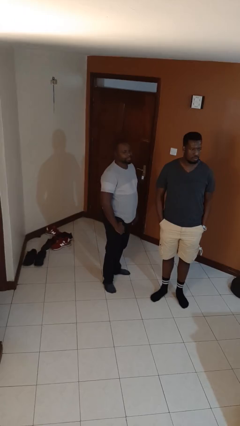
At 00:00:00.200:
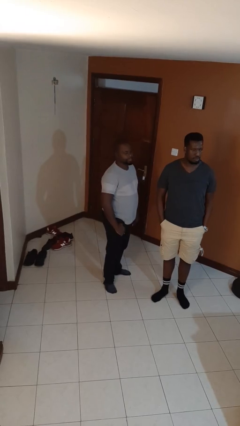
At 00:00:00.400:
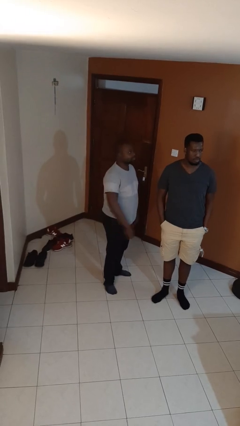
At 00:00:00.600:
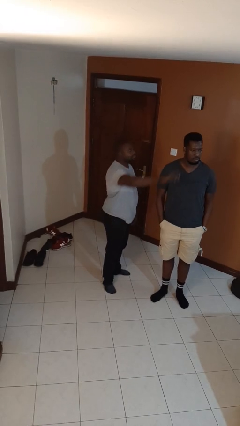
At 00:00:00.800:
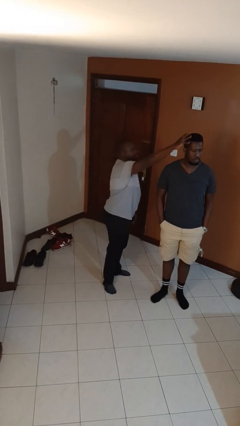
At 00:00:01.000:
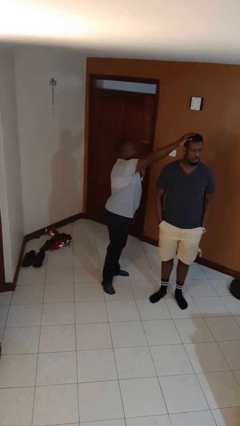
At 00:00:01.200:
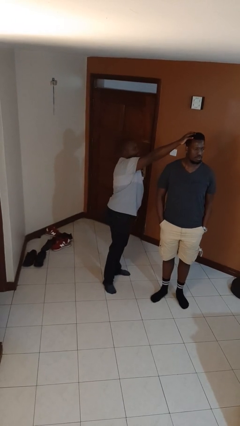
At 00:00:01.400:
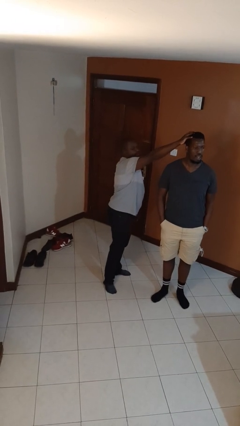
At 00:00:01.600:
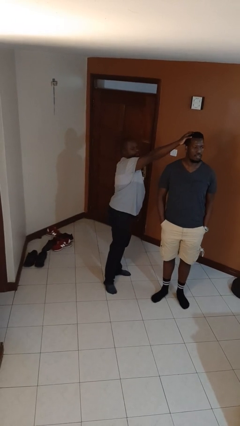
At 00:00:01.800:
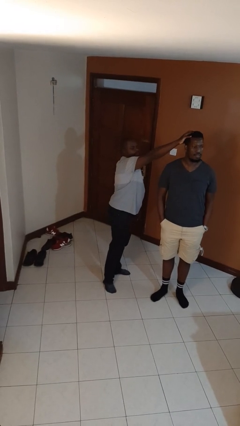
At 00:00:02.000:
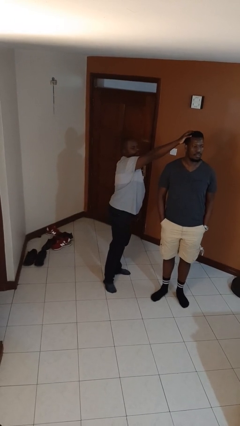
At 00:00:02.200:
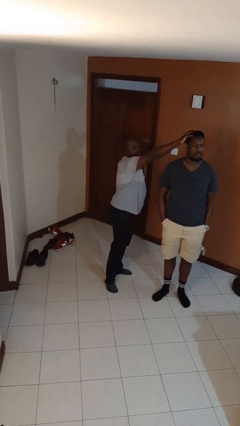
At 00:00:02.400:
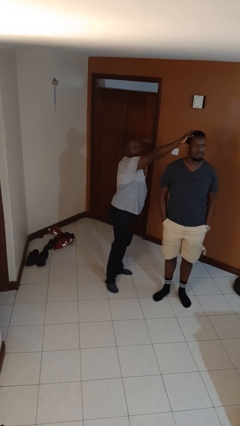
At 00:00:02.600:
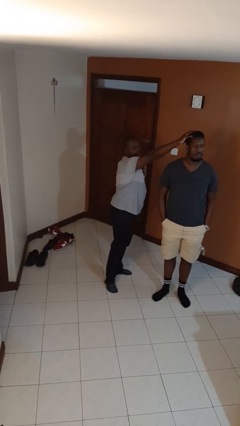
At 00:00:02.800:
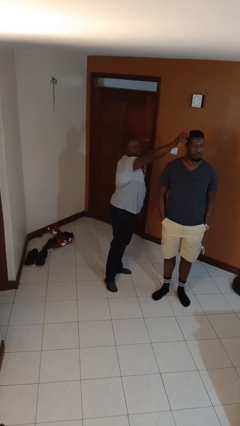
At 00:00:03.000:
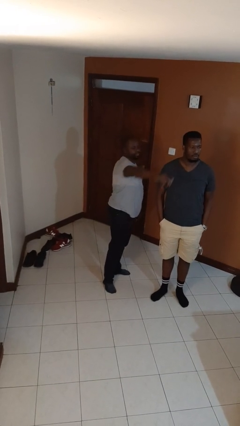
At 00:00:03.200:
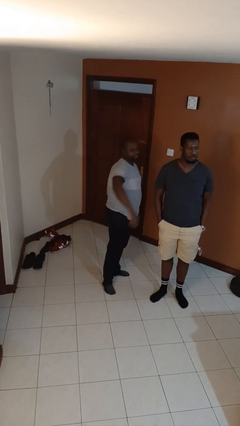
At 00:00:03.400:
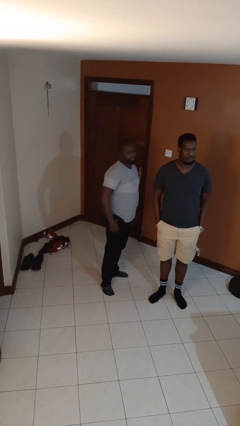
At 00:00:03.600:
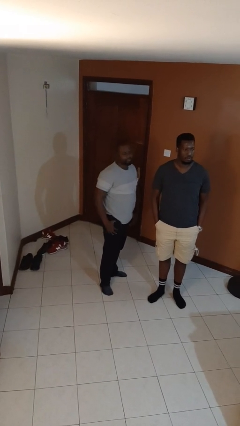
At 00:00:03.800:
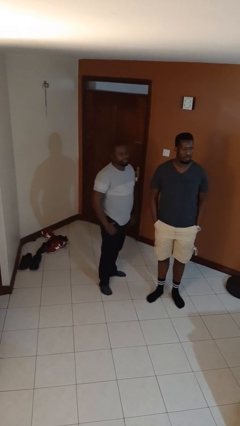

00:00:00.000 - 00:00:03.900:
person grabs person by hair

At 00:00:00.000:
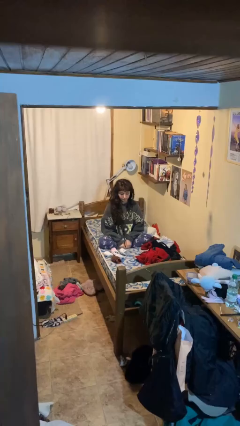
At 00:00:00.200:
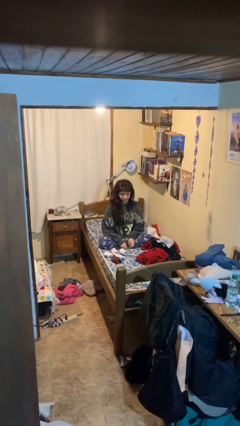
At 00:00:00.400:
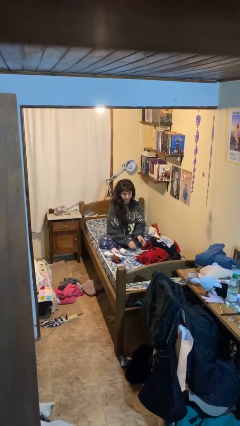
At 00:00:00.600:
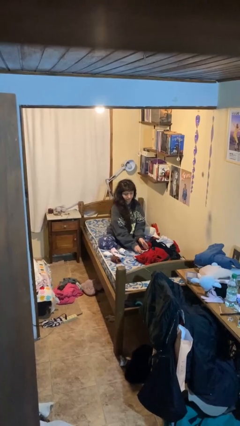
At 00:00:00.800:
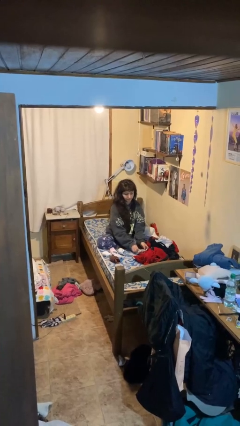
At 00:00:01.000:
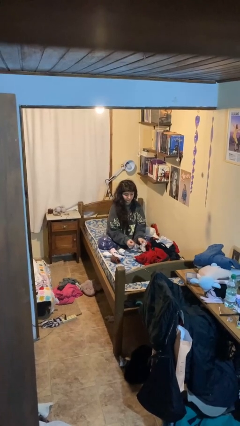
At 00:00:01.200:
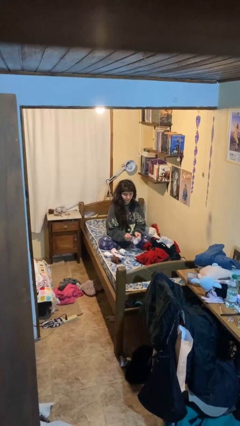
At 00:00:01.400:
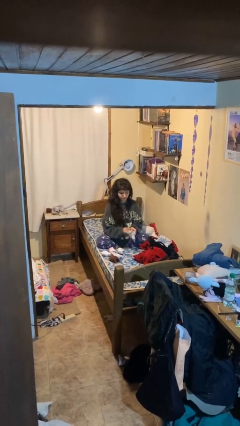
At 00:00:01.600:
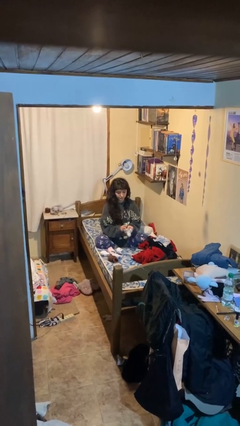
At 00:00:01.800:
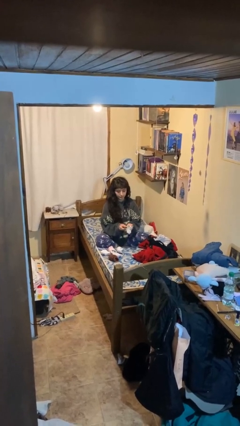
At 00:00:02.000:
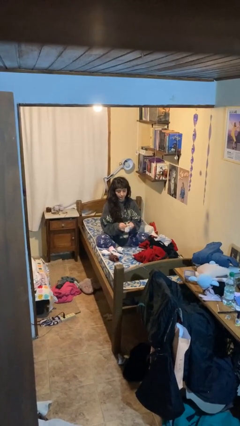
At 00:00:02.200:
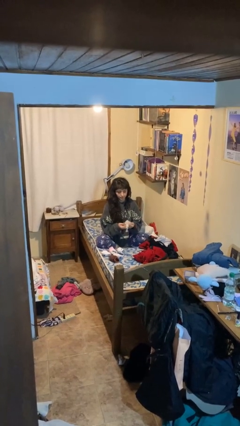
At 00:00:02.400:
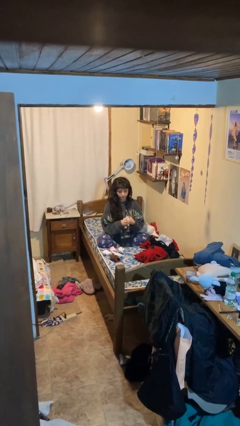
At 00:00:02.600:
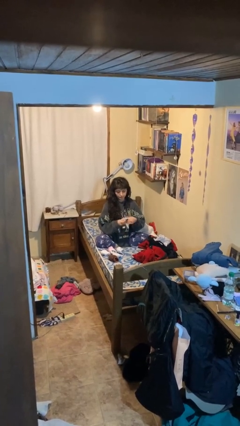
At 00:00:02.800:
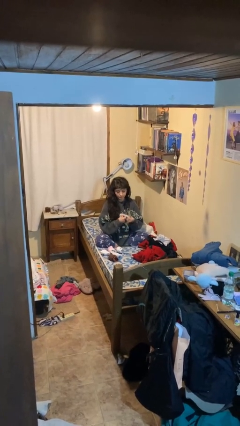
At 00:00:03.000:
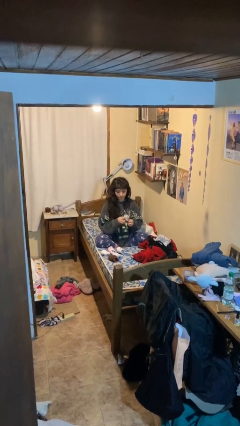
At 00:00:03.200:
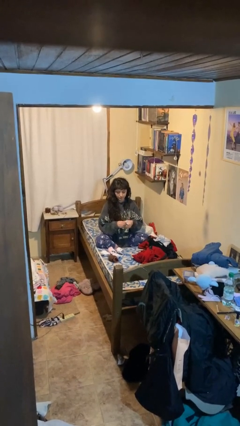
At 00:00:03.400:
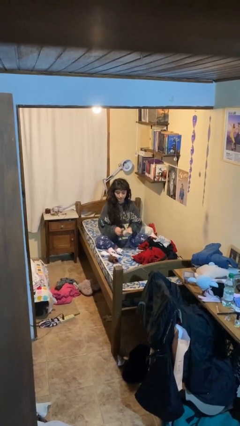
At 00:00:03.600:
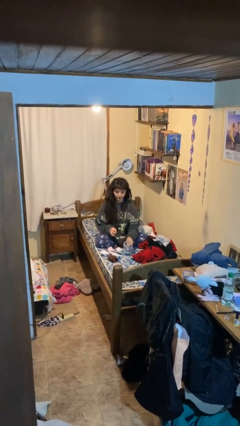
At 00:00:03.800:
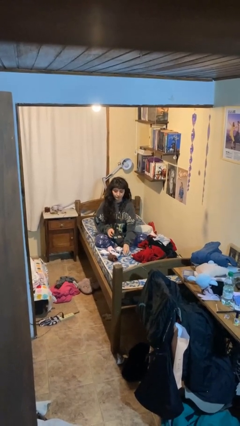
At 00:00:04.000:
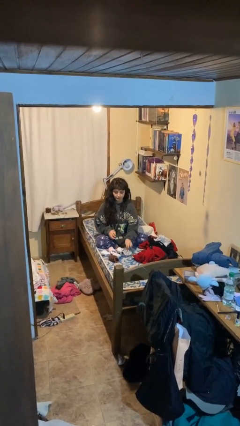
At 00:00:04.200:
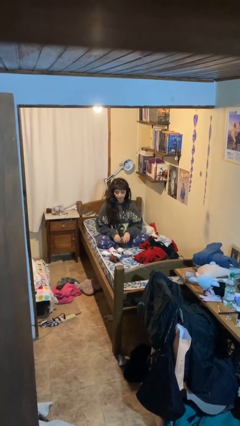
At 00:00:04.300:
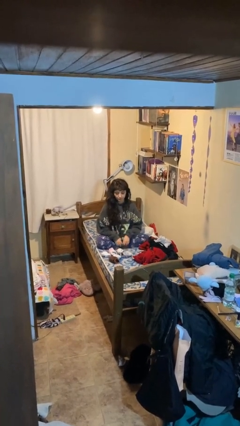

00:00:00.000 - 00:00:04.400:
person folds socks

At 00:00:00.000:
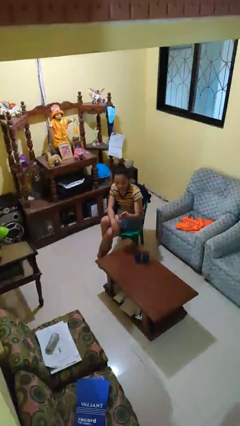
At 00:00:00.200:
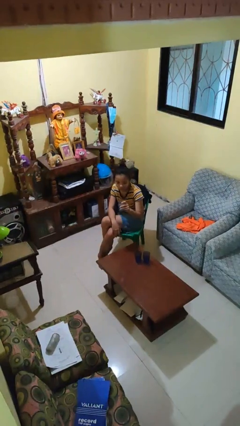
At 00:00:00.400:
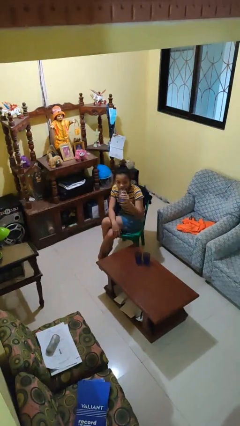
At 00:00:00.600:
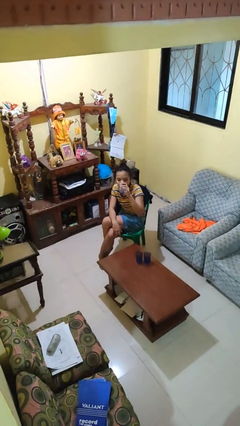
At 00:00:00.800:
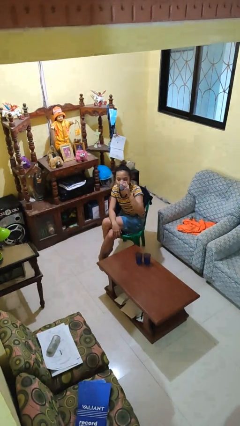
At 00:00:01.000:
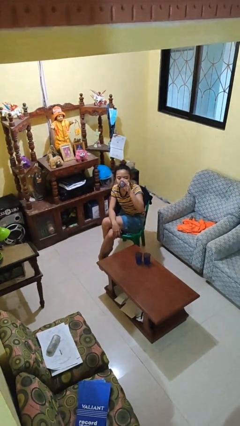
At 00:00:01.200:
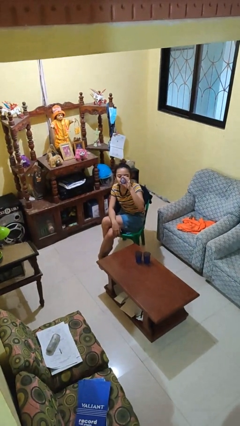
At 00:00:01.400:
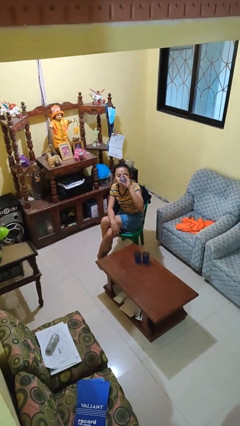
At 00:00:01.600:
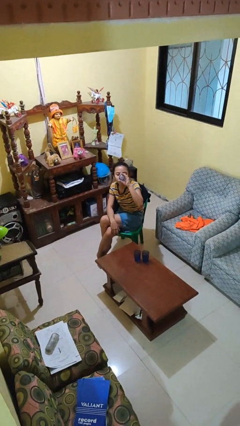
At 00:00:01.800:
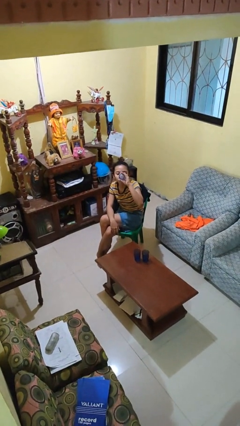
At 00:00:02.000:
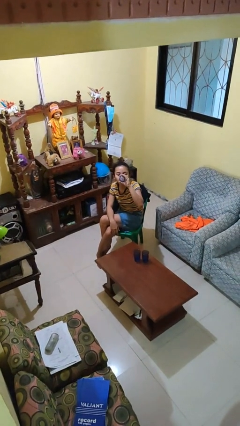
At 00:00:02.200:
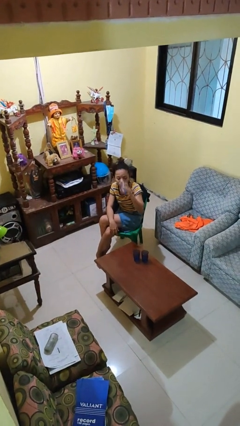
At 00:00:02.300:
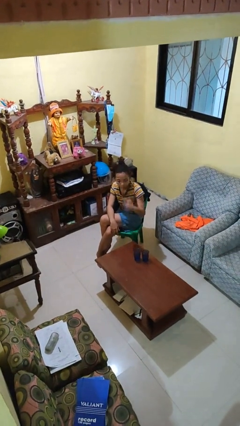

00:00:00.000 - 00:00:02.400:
person drinks from shotglass

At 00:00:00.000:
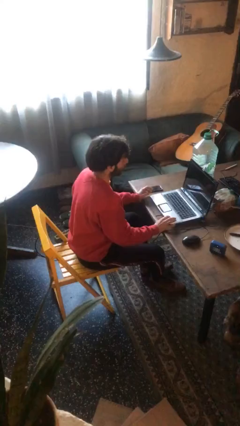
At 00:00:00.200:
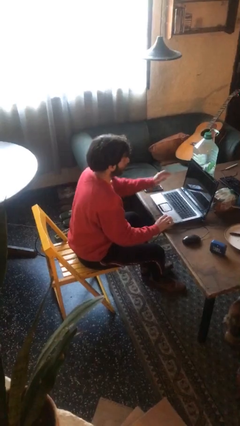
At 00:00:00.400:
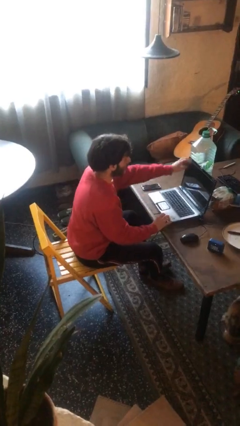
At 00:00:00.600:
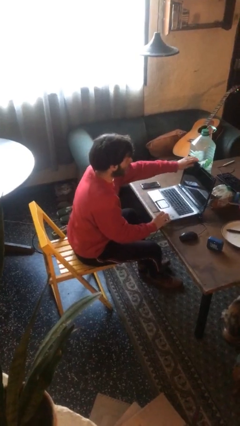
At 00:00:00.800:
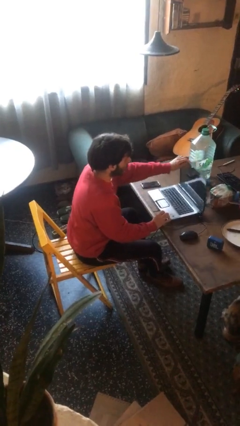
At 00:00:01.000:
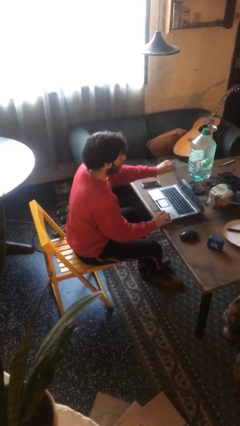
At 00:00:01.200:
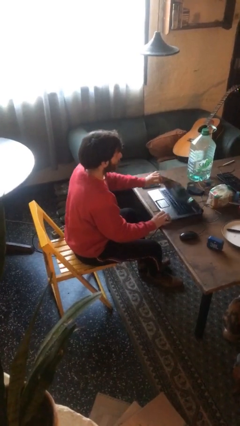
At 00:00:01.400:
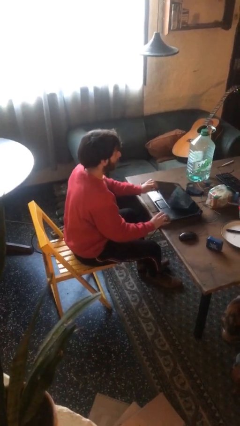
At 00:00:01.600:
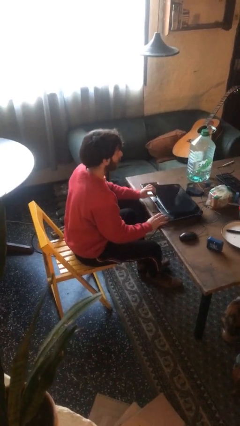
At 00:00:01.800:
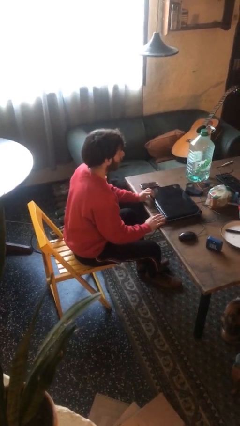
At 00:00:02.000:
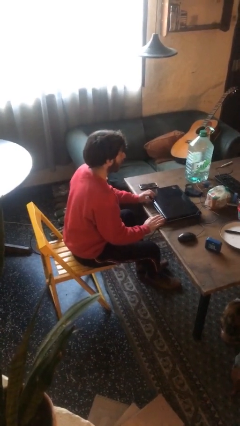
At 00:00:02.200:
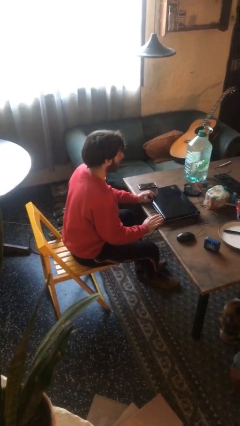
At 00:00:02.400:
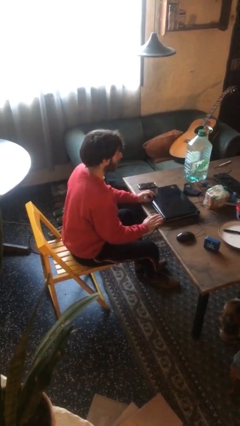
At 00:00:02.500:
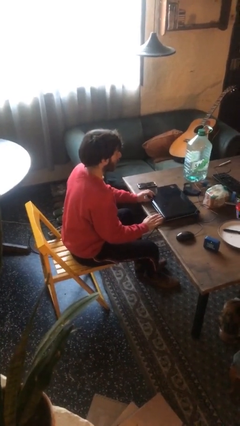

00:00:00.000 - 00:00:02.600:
person closes laptop

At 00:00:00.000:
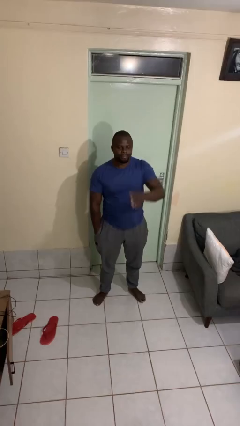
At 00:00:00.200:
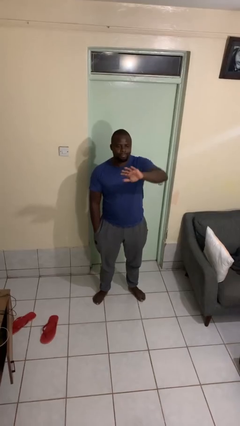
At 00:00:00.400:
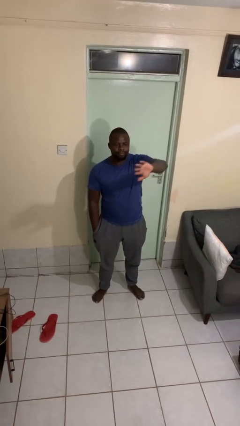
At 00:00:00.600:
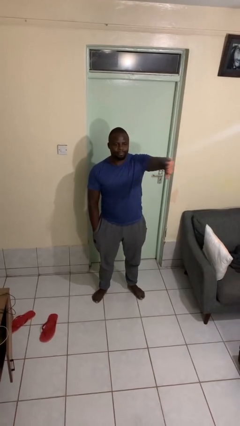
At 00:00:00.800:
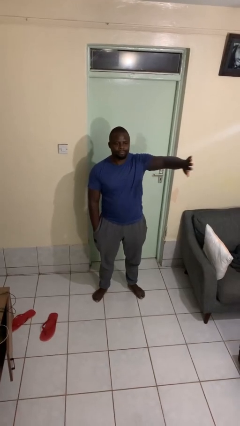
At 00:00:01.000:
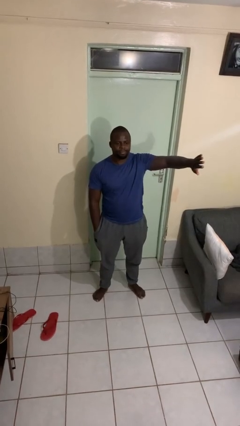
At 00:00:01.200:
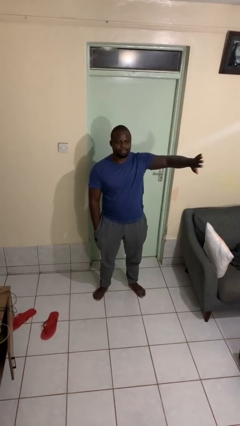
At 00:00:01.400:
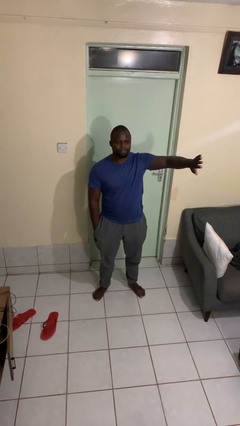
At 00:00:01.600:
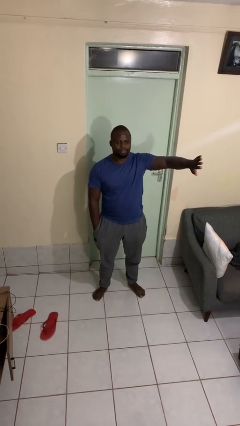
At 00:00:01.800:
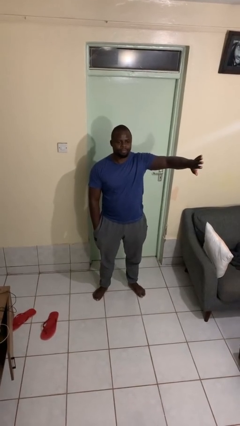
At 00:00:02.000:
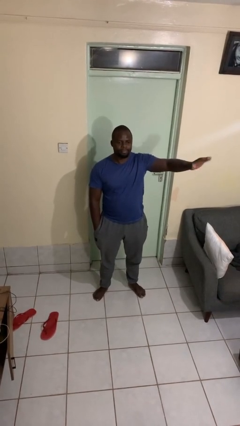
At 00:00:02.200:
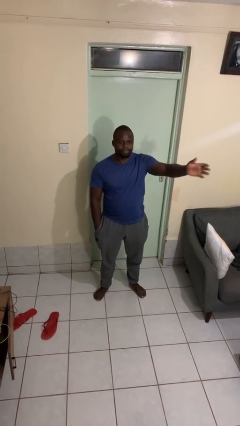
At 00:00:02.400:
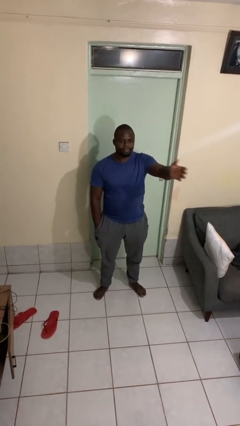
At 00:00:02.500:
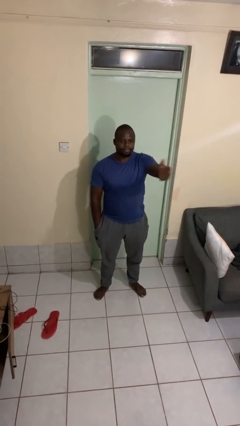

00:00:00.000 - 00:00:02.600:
person gestures swipe left

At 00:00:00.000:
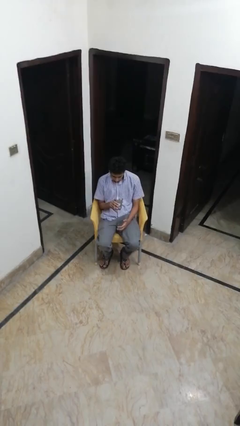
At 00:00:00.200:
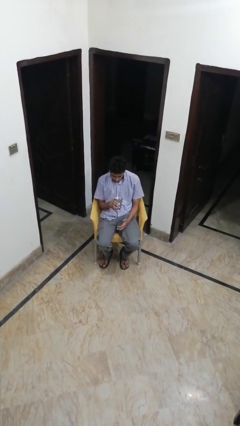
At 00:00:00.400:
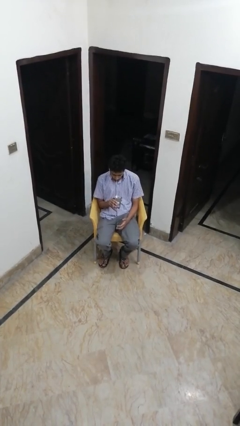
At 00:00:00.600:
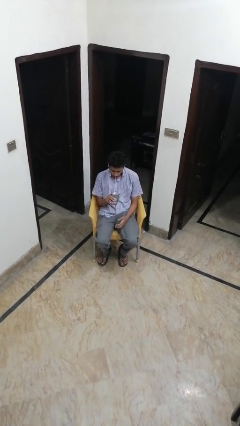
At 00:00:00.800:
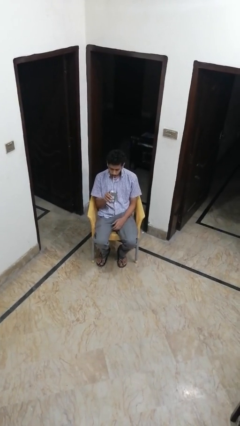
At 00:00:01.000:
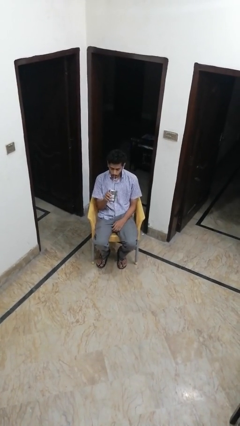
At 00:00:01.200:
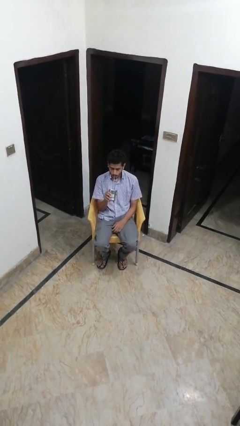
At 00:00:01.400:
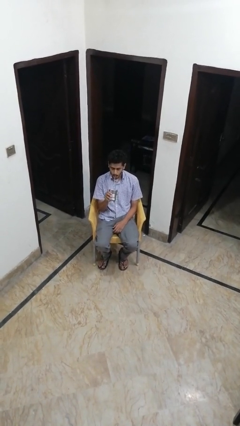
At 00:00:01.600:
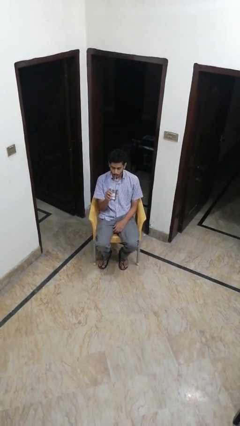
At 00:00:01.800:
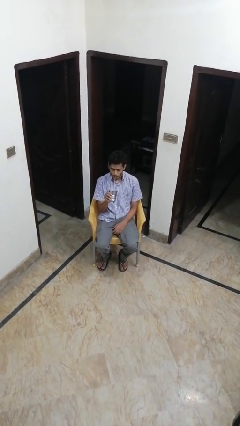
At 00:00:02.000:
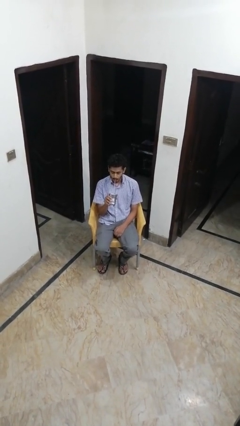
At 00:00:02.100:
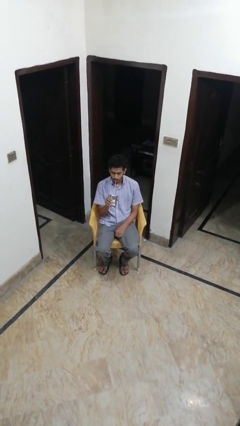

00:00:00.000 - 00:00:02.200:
person drinks from straw
